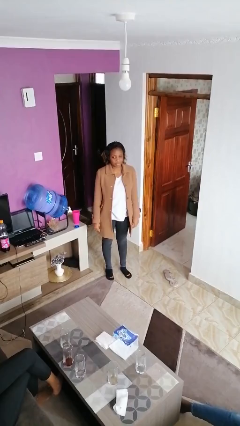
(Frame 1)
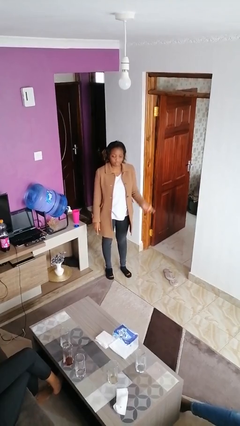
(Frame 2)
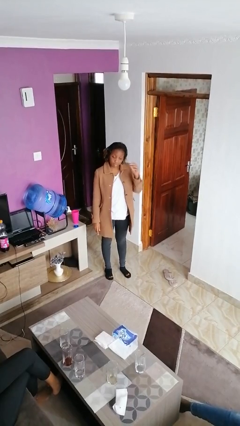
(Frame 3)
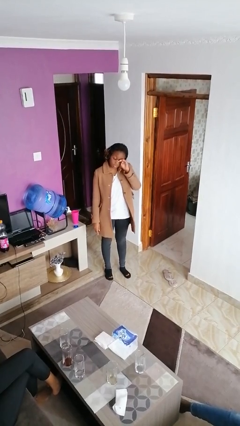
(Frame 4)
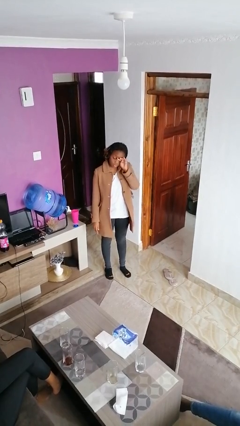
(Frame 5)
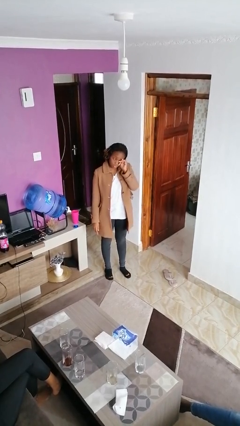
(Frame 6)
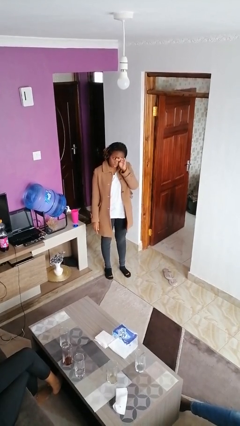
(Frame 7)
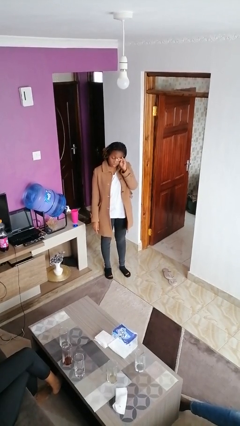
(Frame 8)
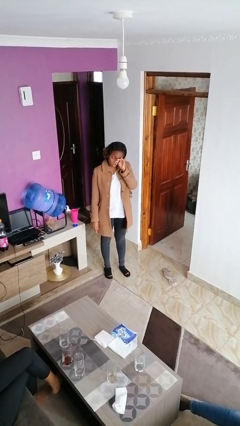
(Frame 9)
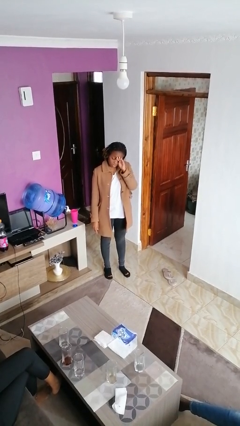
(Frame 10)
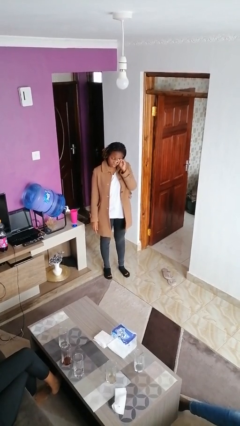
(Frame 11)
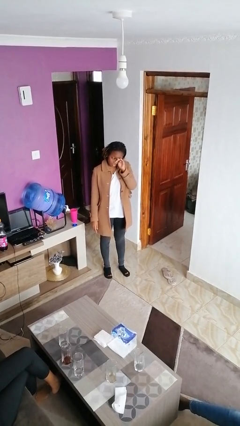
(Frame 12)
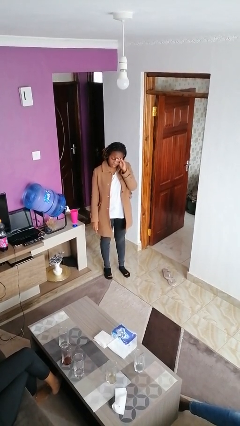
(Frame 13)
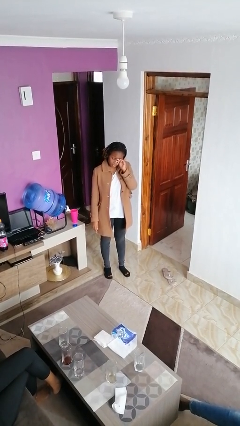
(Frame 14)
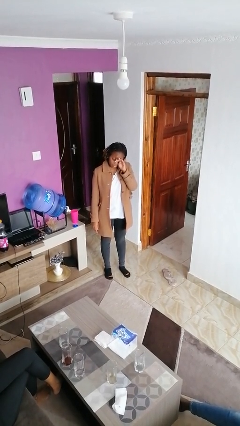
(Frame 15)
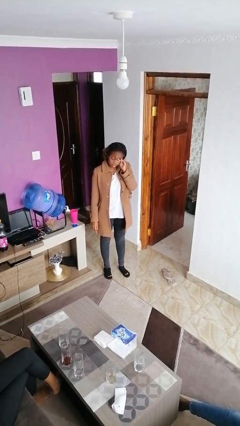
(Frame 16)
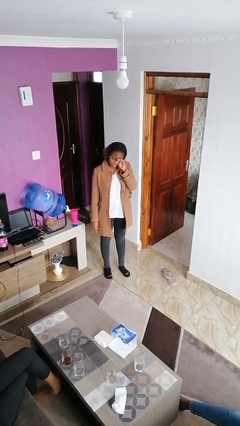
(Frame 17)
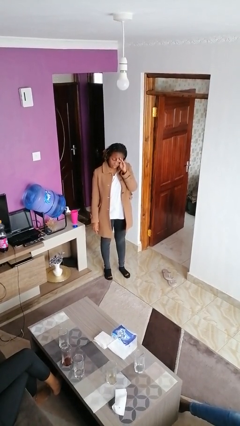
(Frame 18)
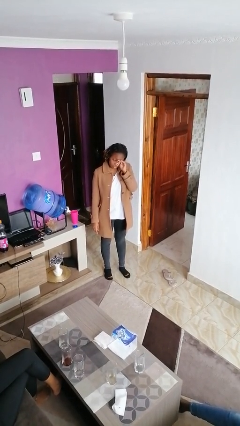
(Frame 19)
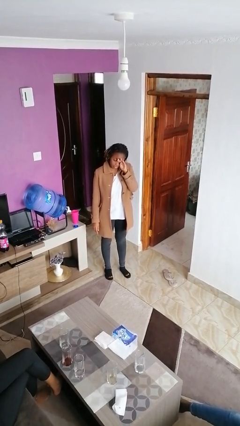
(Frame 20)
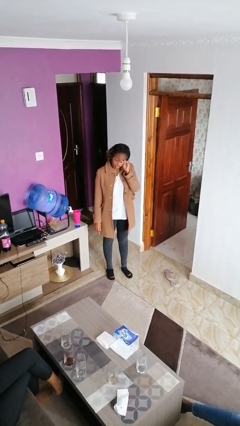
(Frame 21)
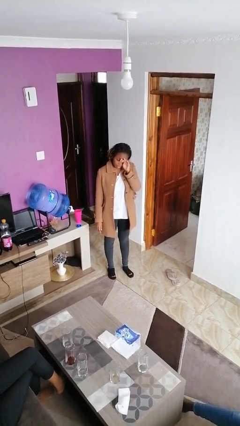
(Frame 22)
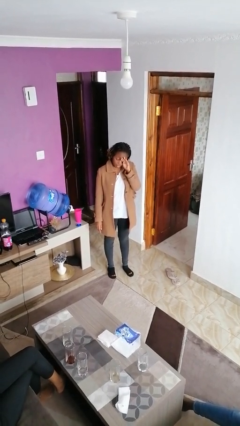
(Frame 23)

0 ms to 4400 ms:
person scratches face

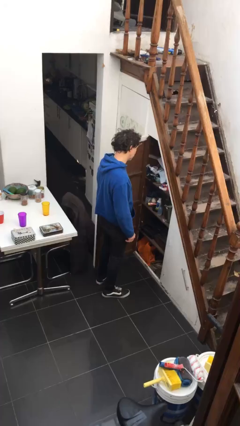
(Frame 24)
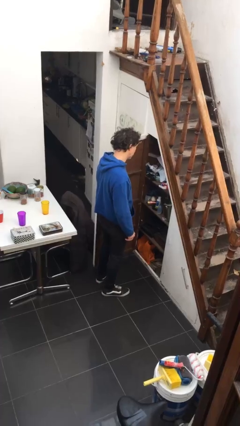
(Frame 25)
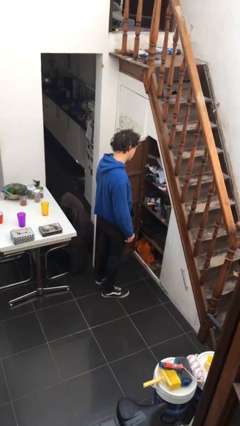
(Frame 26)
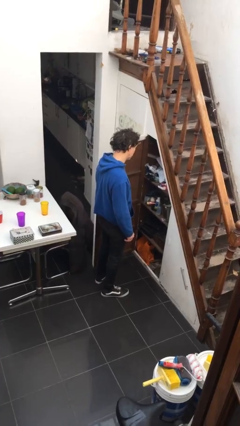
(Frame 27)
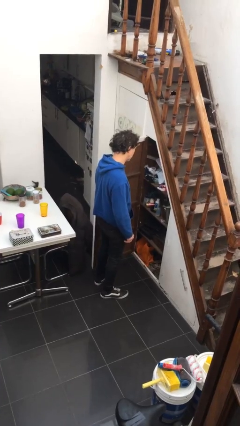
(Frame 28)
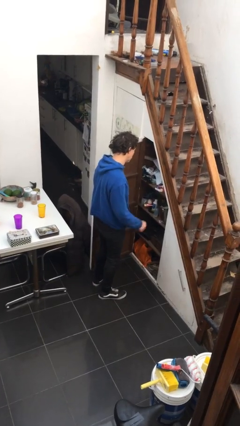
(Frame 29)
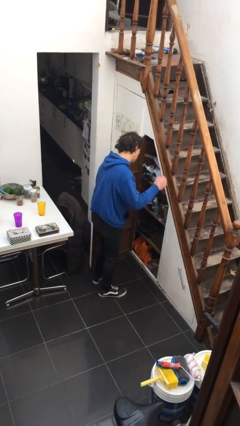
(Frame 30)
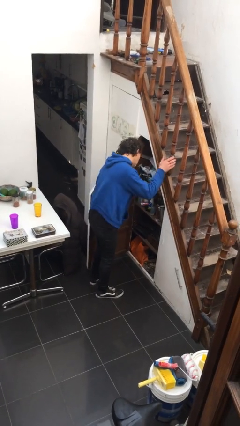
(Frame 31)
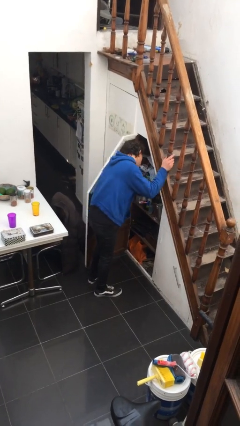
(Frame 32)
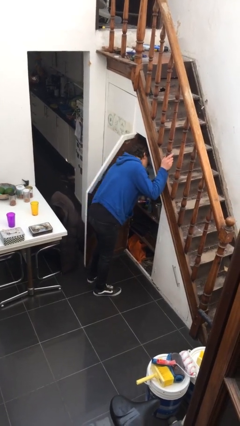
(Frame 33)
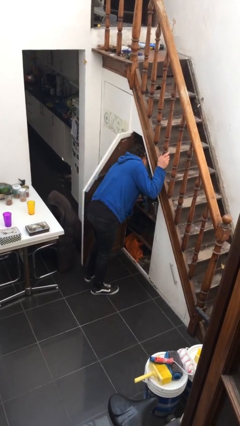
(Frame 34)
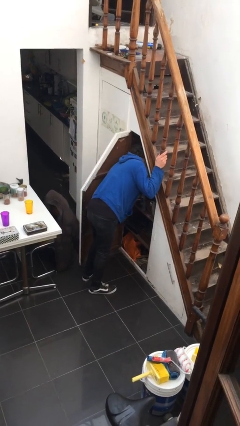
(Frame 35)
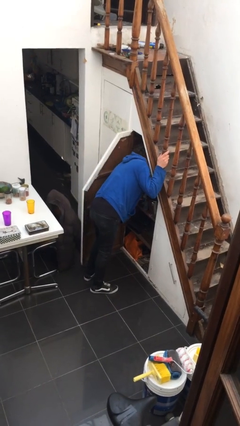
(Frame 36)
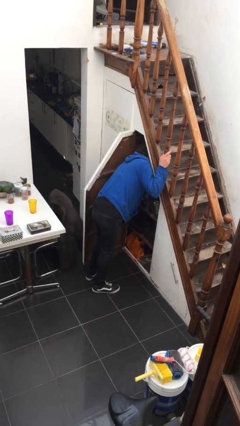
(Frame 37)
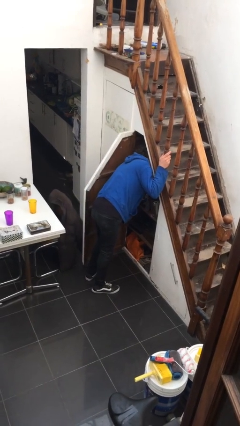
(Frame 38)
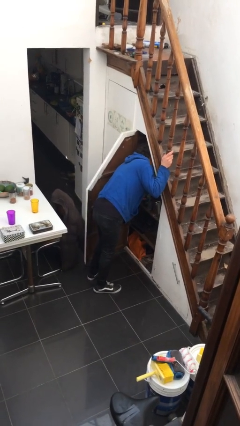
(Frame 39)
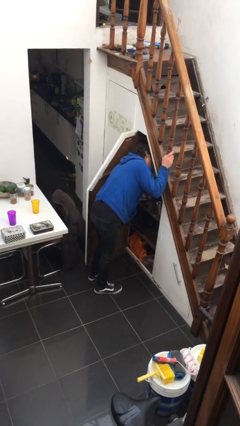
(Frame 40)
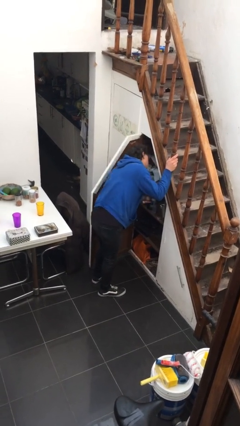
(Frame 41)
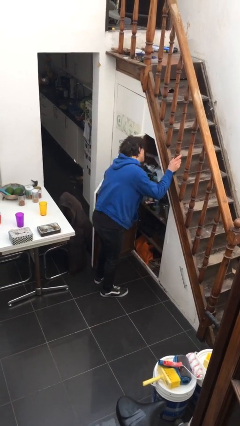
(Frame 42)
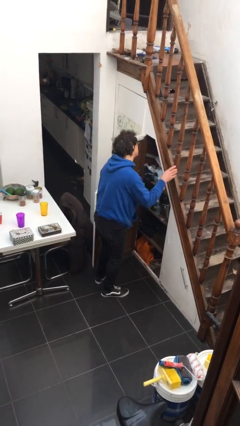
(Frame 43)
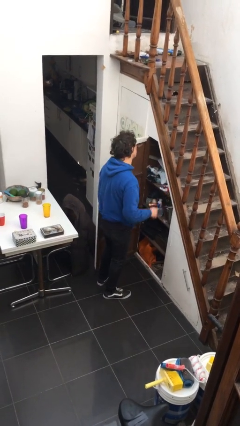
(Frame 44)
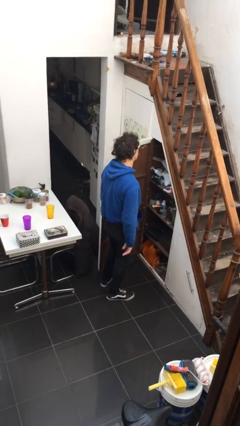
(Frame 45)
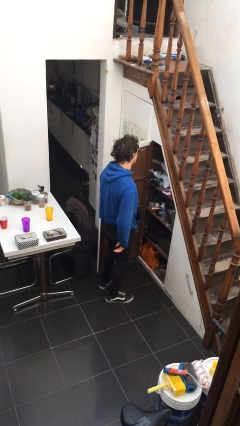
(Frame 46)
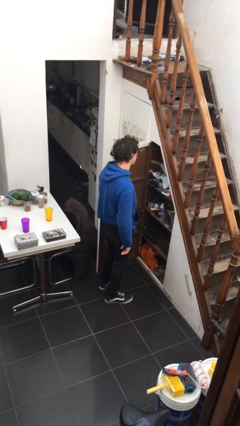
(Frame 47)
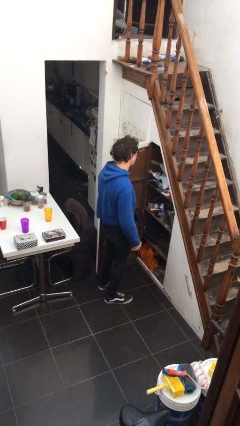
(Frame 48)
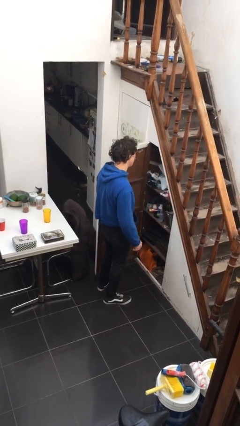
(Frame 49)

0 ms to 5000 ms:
person searches in cabinet

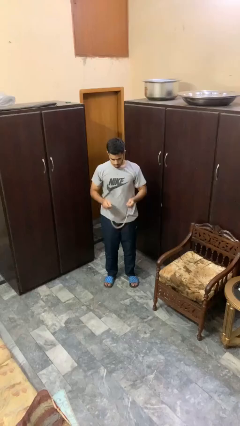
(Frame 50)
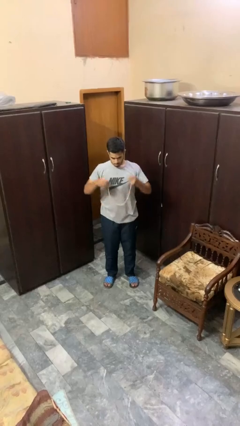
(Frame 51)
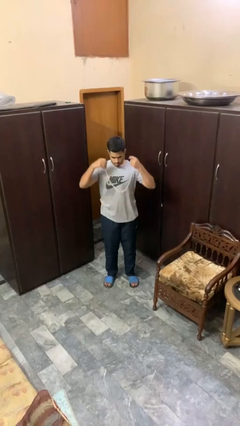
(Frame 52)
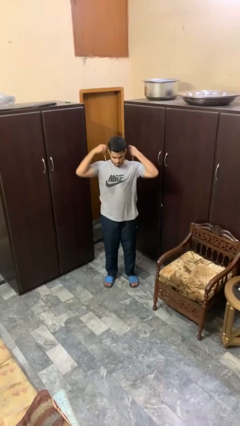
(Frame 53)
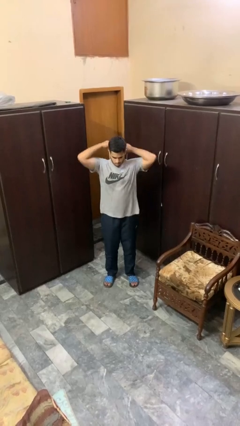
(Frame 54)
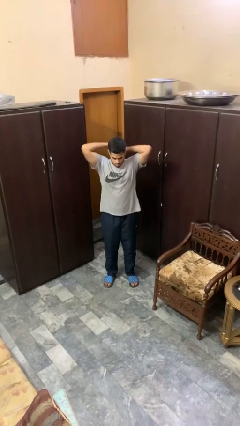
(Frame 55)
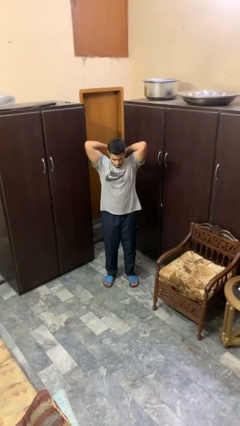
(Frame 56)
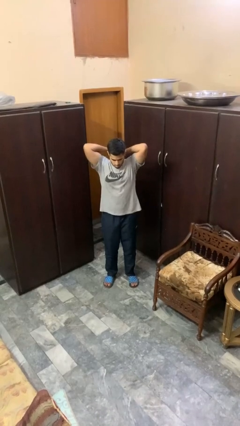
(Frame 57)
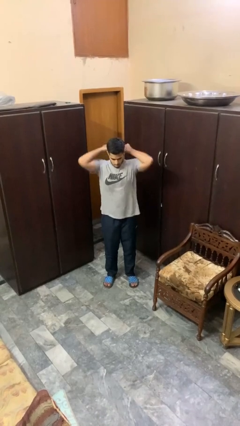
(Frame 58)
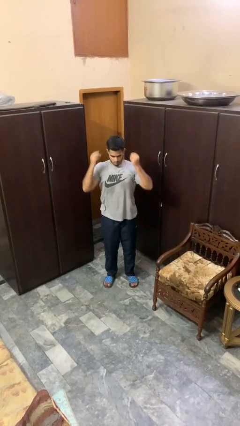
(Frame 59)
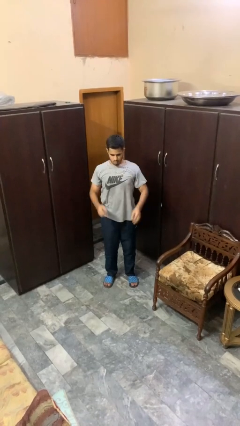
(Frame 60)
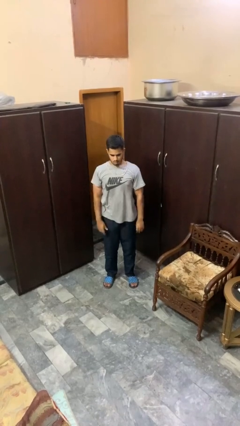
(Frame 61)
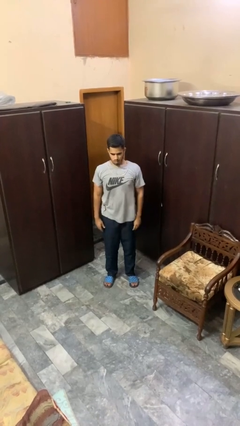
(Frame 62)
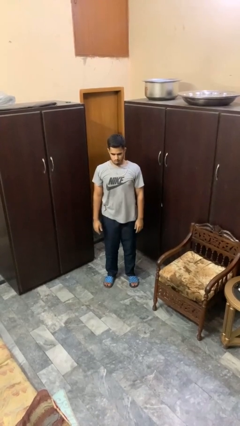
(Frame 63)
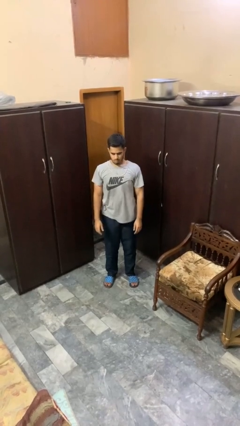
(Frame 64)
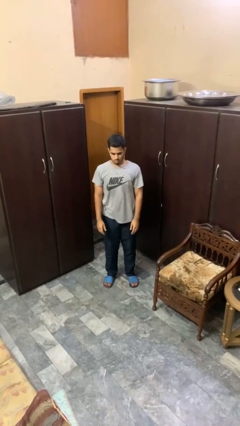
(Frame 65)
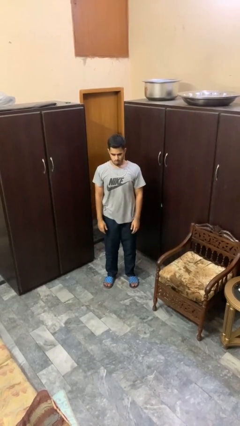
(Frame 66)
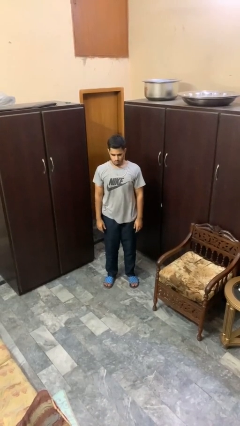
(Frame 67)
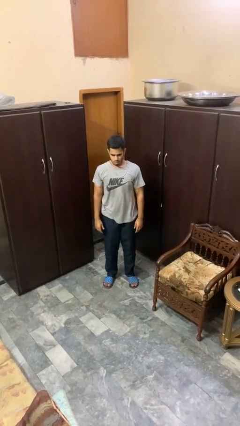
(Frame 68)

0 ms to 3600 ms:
person puts on necklace

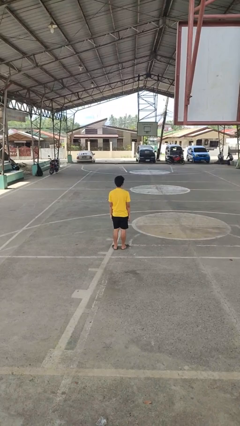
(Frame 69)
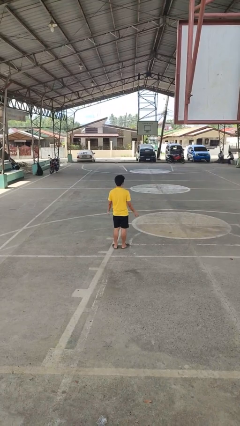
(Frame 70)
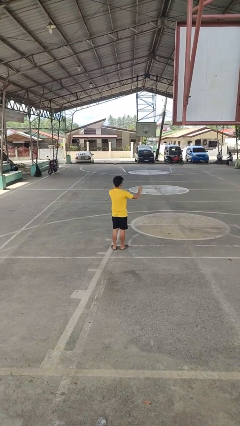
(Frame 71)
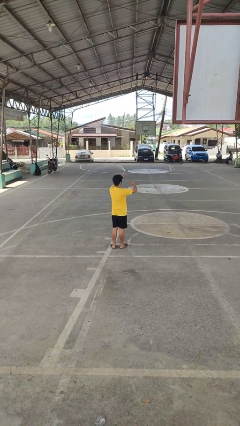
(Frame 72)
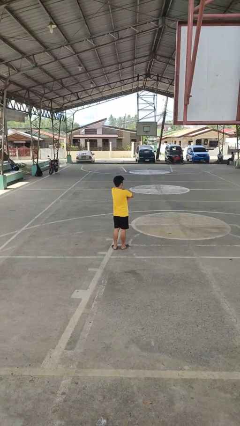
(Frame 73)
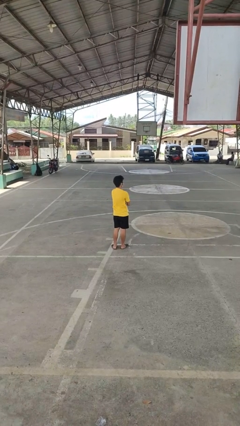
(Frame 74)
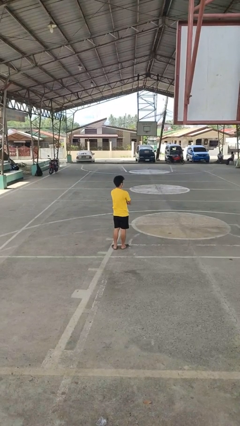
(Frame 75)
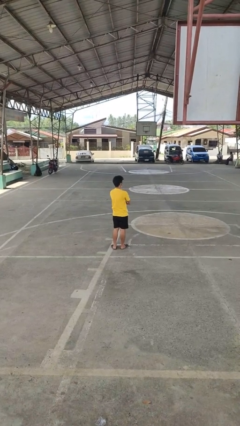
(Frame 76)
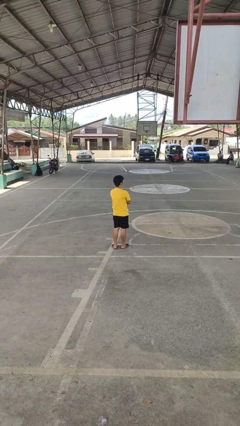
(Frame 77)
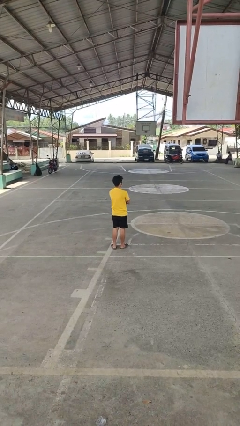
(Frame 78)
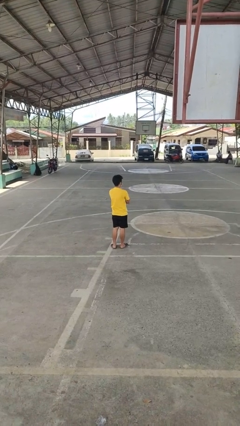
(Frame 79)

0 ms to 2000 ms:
person crosses arms

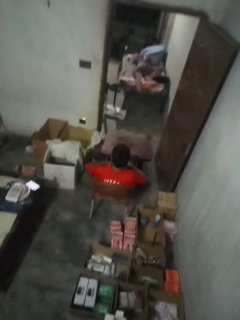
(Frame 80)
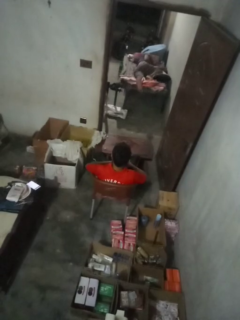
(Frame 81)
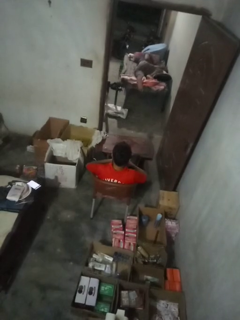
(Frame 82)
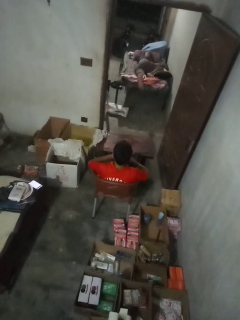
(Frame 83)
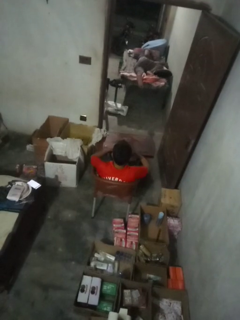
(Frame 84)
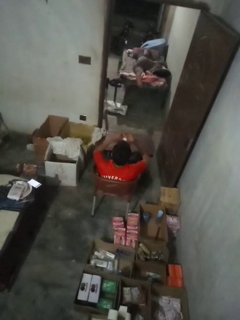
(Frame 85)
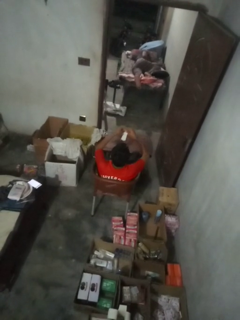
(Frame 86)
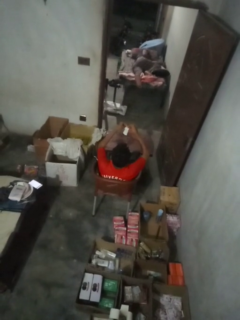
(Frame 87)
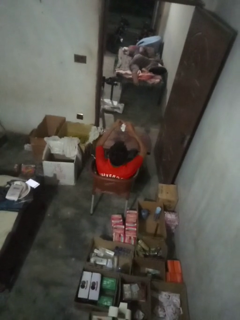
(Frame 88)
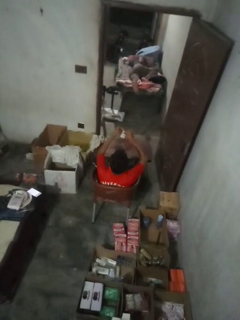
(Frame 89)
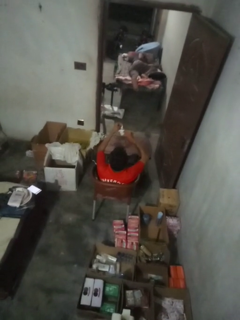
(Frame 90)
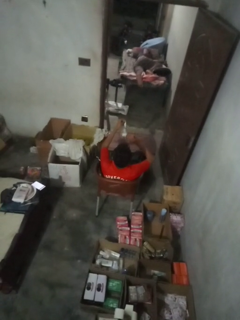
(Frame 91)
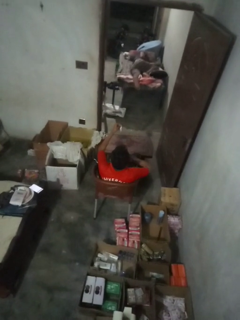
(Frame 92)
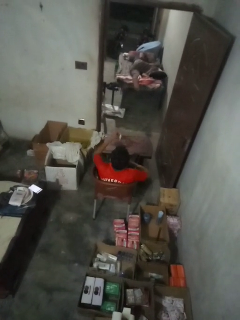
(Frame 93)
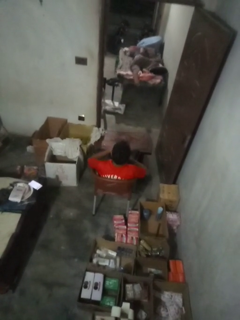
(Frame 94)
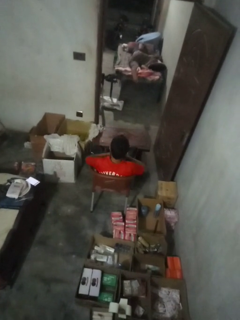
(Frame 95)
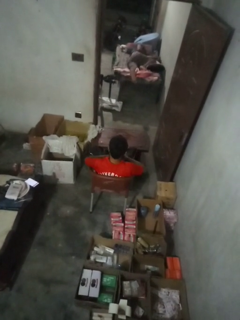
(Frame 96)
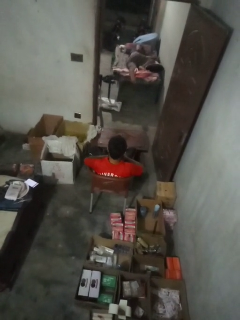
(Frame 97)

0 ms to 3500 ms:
person tears paper
